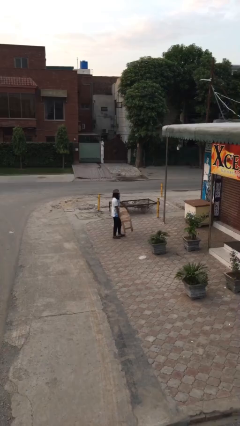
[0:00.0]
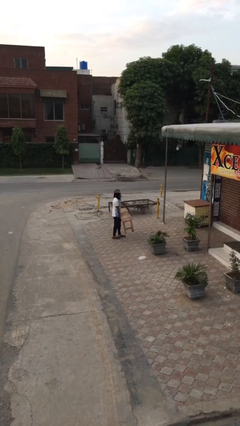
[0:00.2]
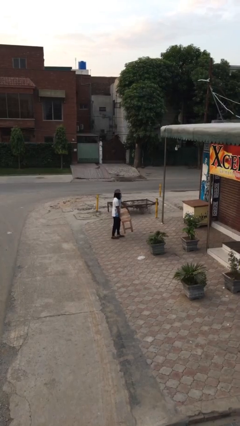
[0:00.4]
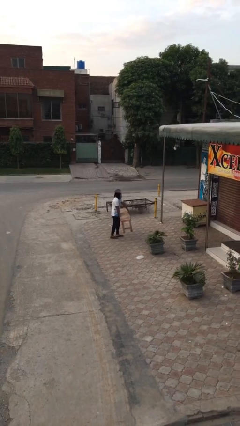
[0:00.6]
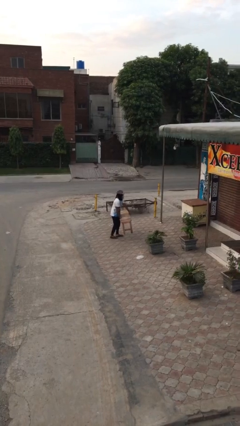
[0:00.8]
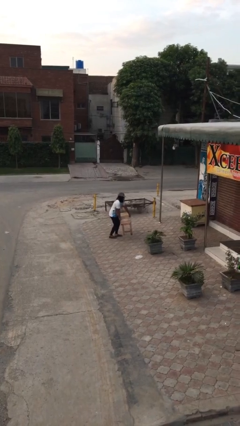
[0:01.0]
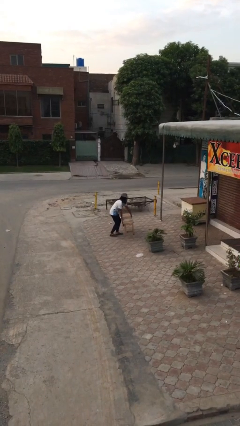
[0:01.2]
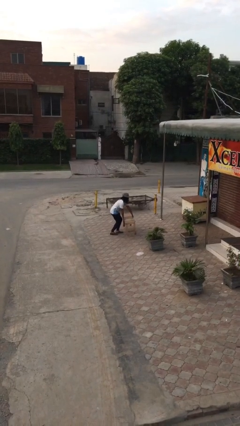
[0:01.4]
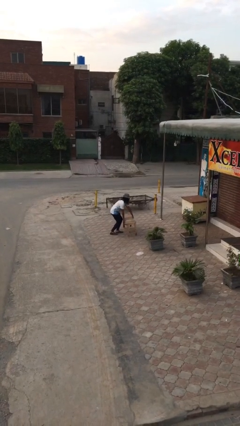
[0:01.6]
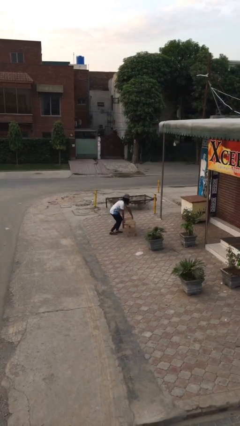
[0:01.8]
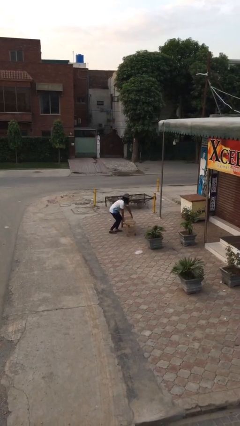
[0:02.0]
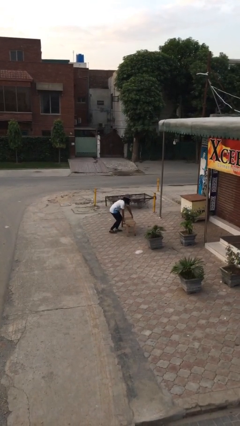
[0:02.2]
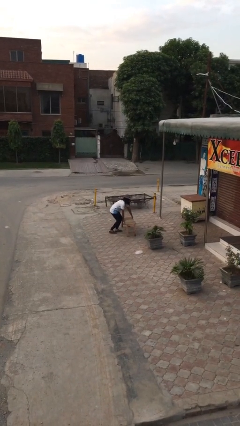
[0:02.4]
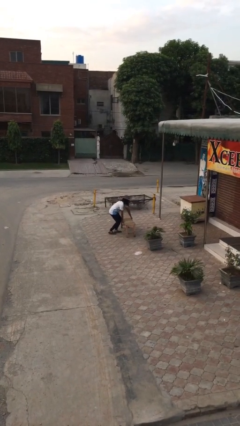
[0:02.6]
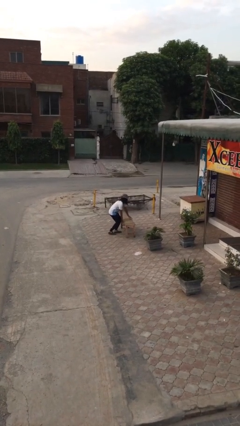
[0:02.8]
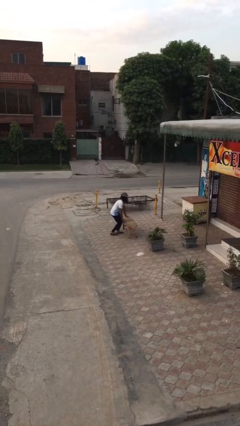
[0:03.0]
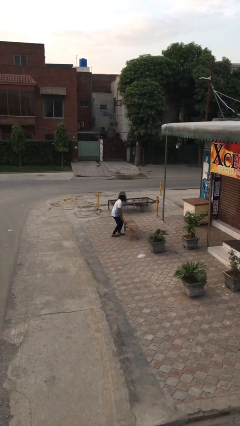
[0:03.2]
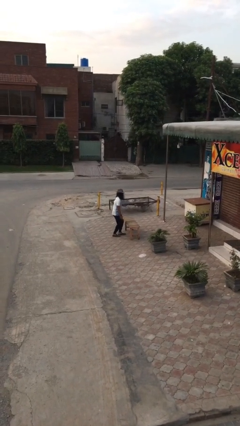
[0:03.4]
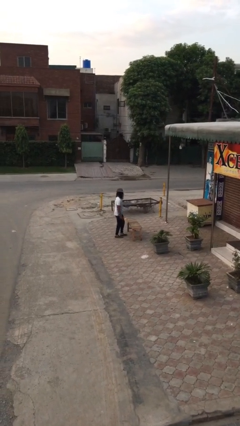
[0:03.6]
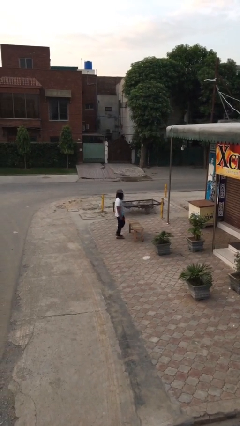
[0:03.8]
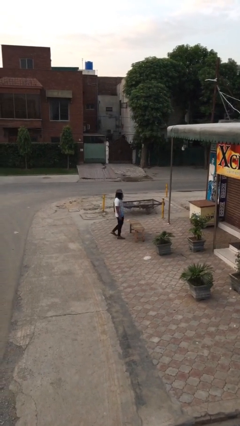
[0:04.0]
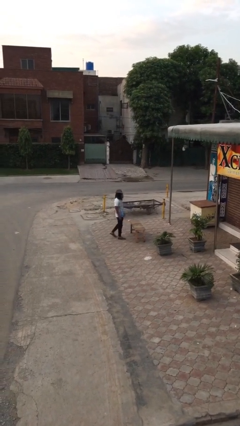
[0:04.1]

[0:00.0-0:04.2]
person puts down object on floor

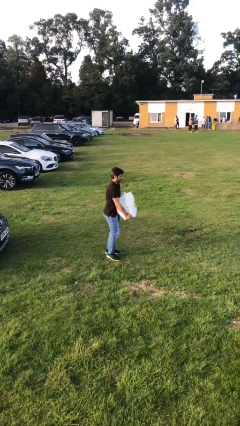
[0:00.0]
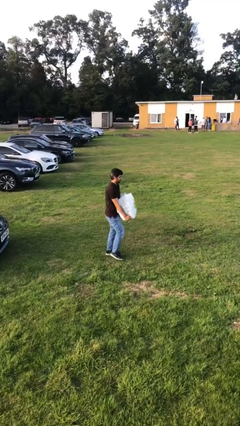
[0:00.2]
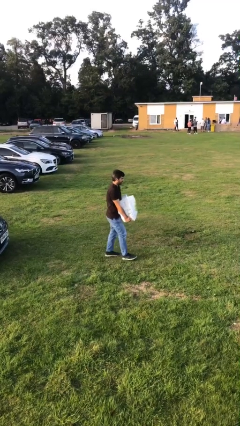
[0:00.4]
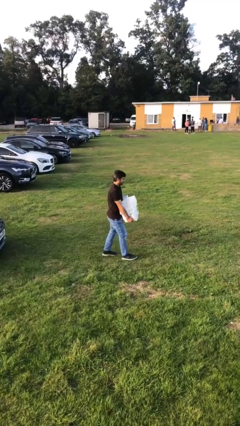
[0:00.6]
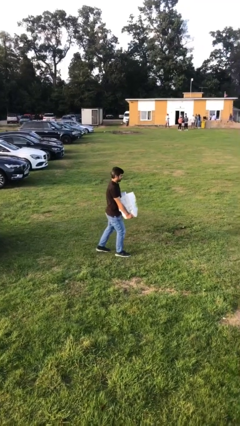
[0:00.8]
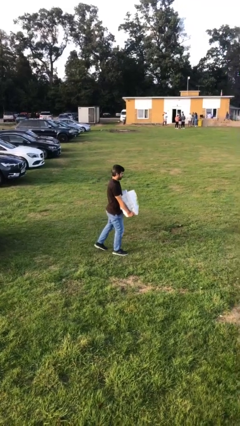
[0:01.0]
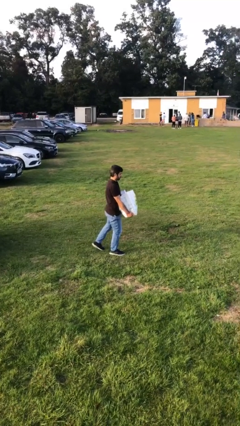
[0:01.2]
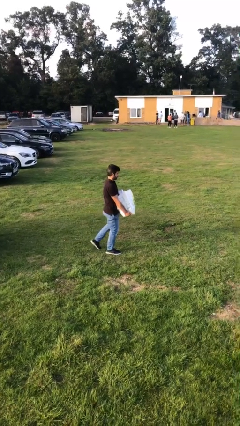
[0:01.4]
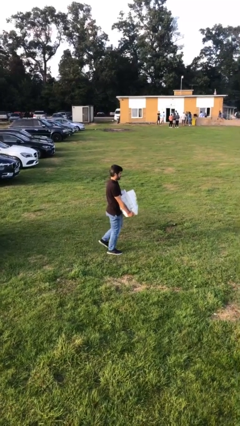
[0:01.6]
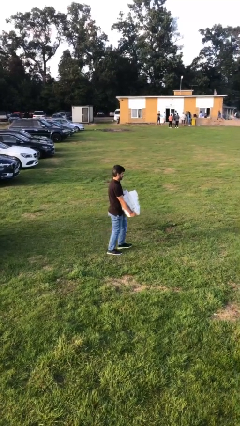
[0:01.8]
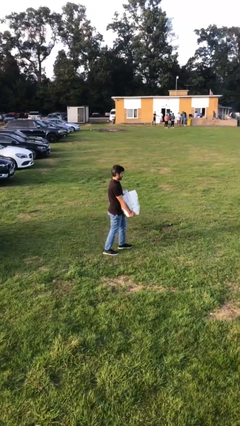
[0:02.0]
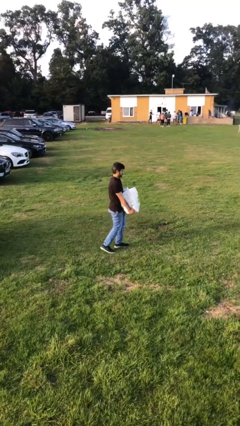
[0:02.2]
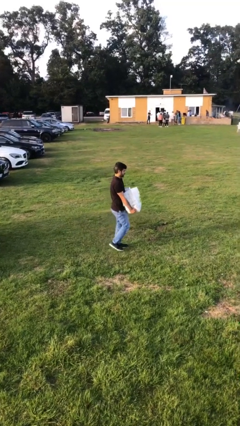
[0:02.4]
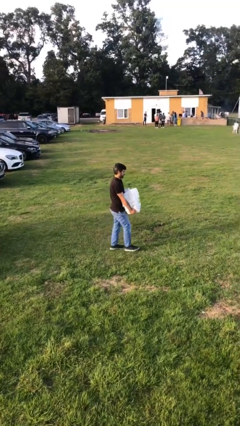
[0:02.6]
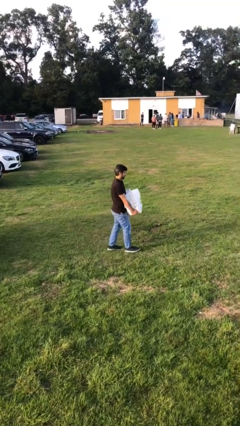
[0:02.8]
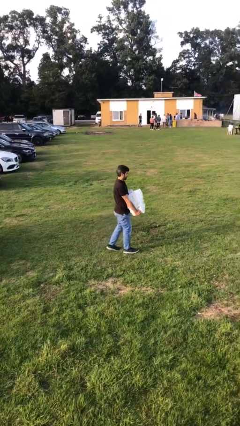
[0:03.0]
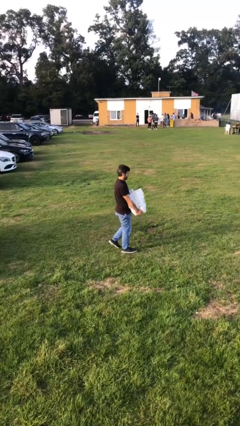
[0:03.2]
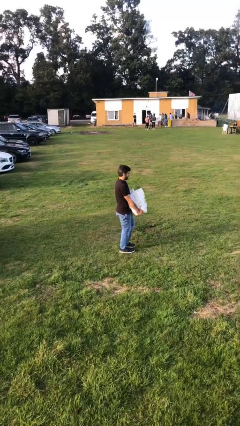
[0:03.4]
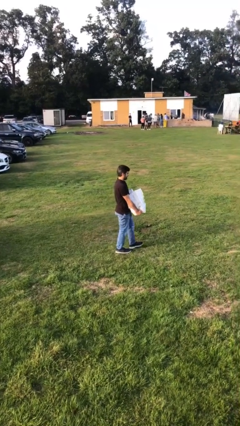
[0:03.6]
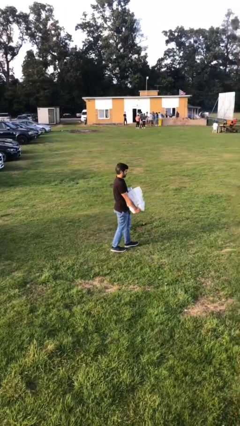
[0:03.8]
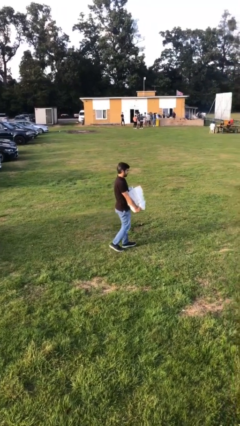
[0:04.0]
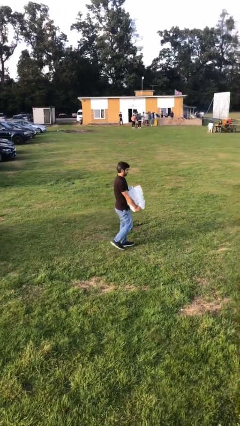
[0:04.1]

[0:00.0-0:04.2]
person carries heavy object

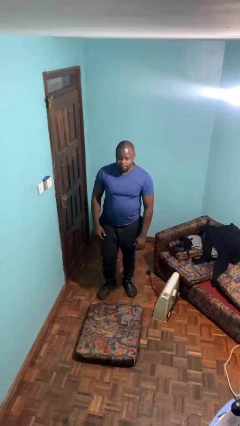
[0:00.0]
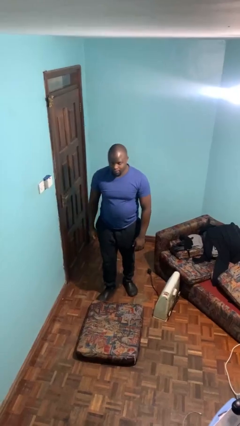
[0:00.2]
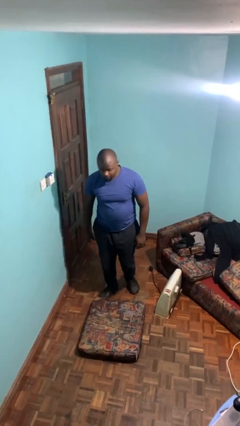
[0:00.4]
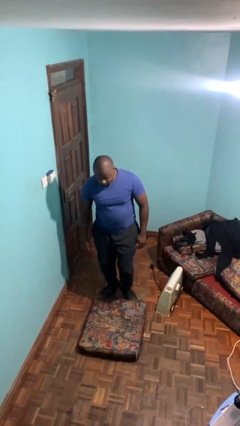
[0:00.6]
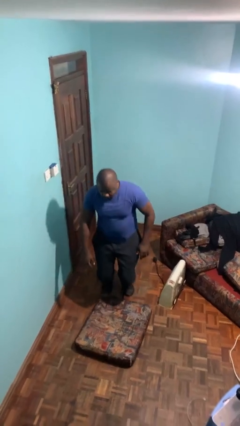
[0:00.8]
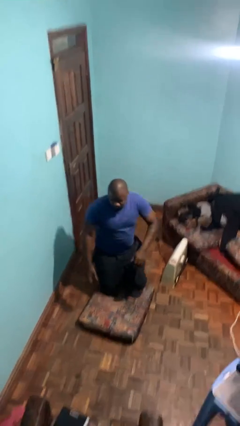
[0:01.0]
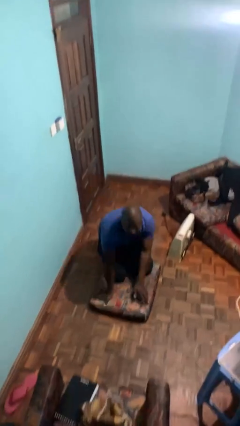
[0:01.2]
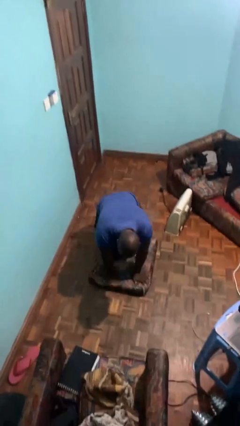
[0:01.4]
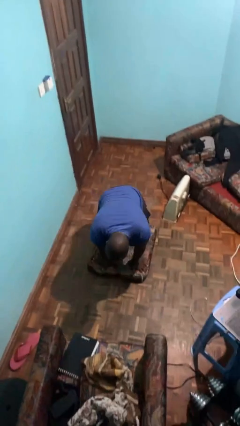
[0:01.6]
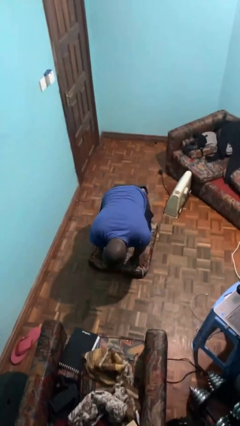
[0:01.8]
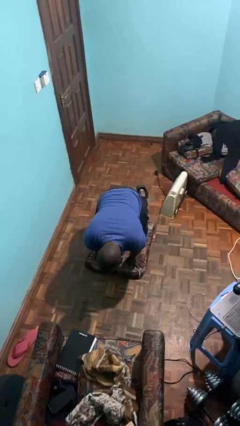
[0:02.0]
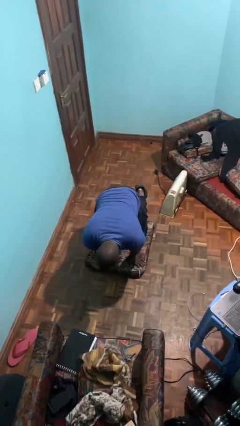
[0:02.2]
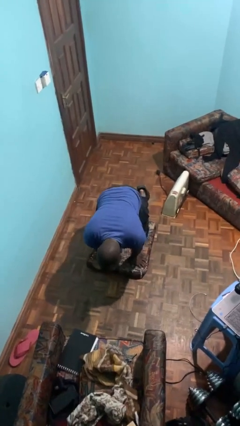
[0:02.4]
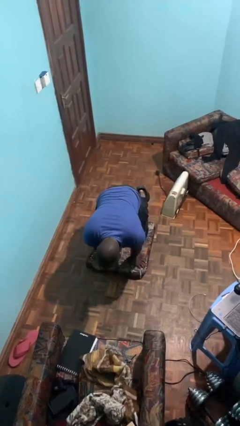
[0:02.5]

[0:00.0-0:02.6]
person trips on object on floor

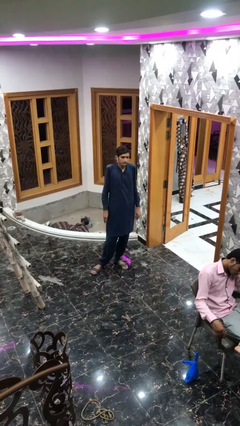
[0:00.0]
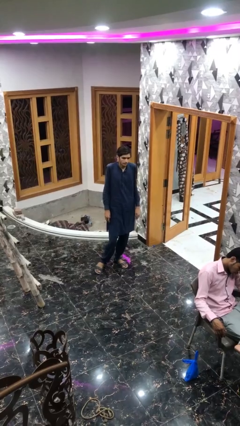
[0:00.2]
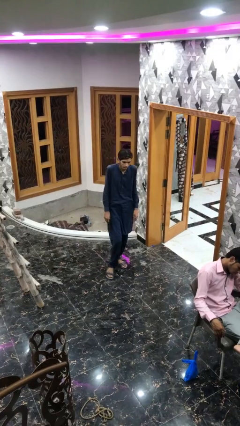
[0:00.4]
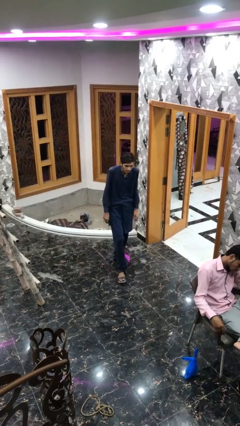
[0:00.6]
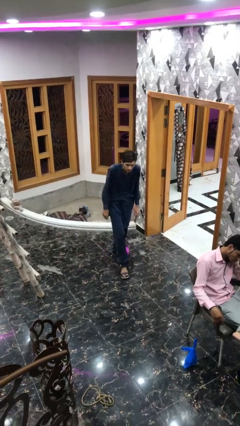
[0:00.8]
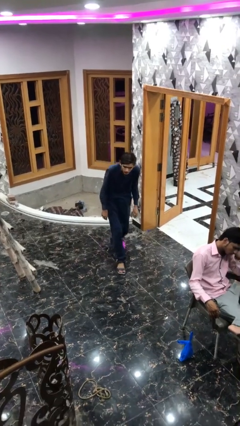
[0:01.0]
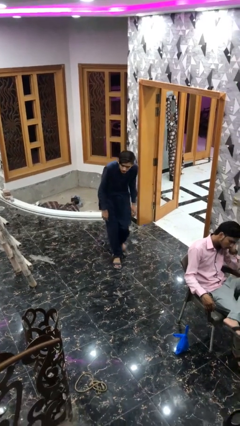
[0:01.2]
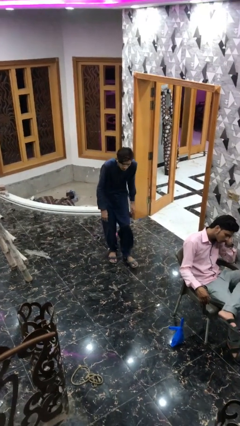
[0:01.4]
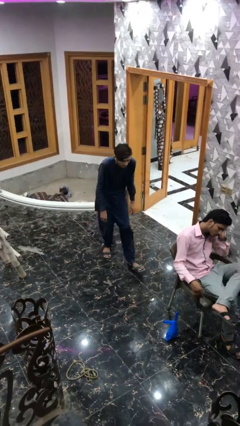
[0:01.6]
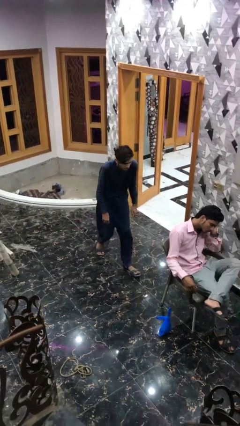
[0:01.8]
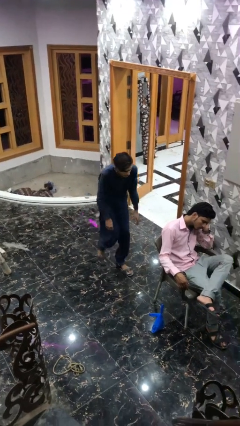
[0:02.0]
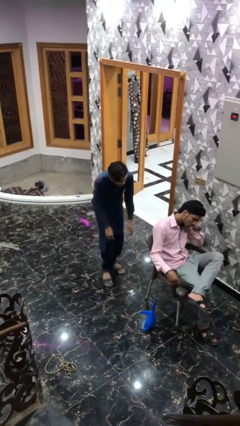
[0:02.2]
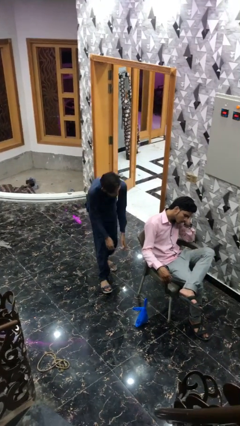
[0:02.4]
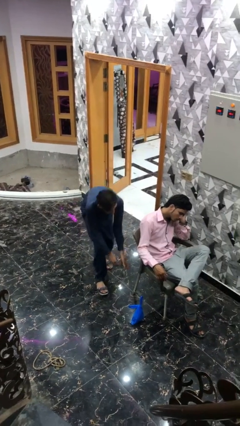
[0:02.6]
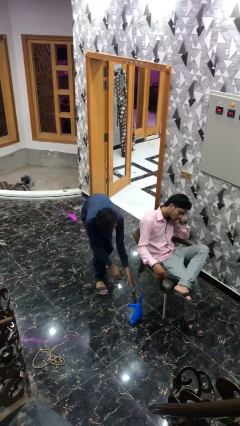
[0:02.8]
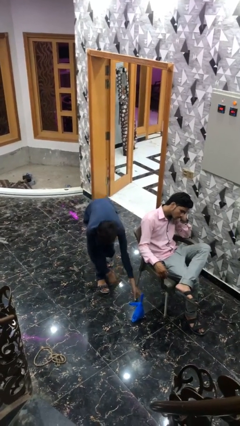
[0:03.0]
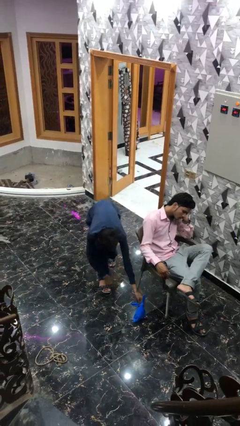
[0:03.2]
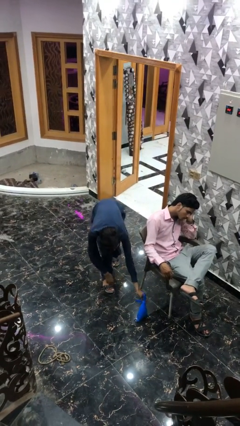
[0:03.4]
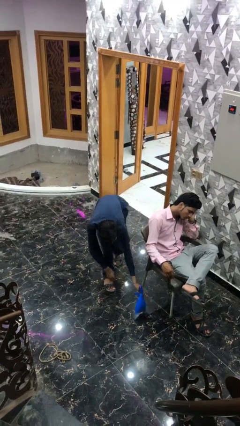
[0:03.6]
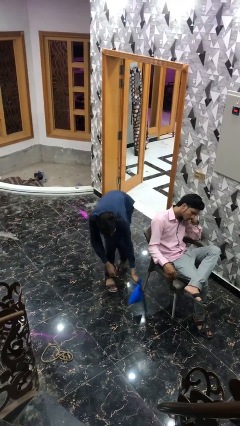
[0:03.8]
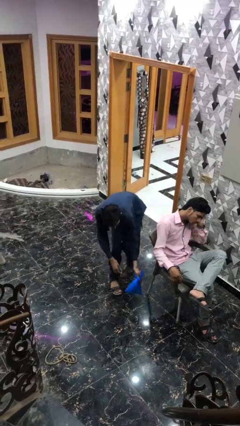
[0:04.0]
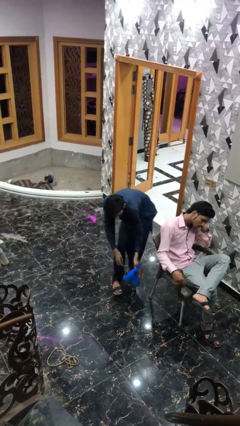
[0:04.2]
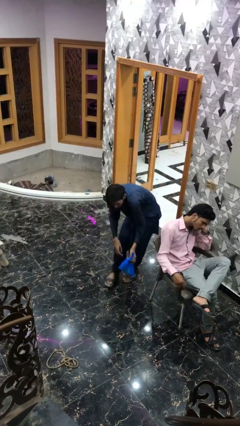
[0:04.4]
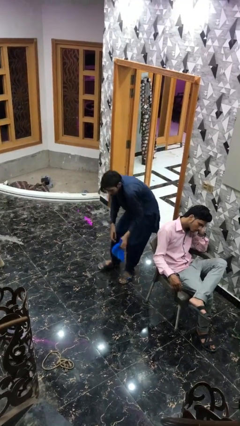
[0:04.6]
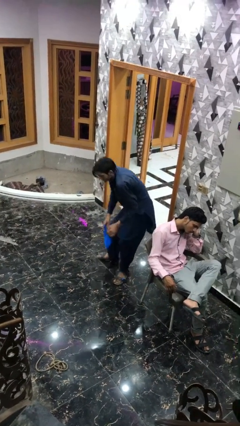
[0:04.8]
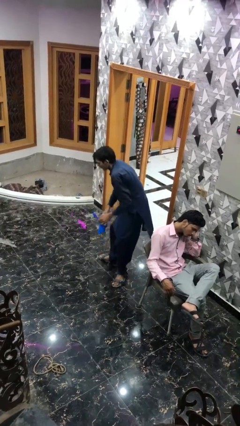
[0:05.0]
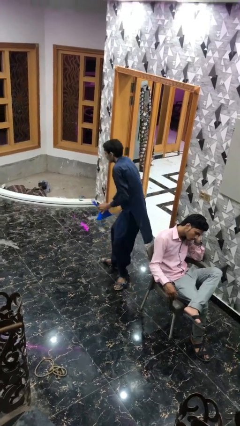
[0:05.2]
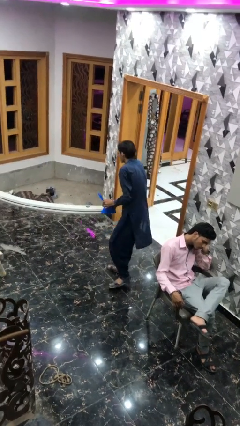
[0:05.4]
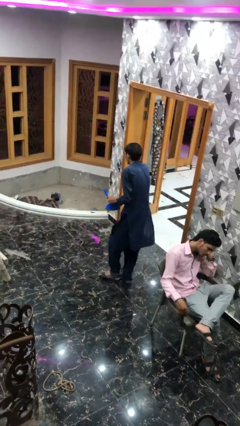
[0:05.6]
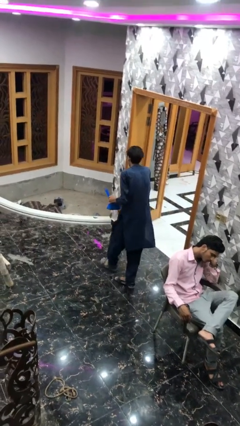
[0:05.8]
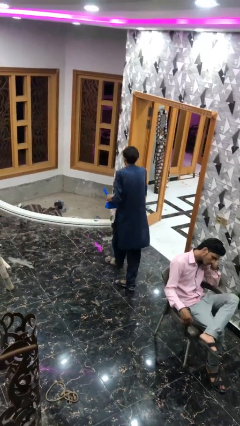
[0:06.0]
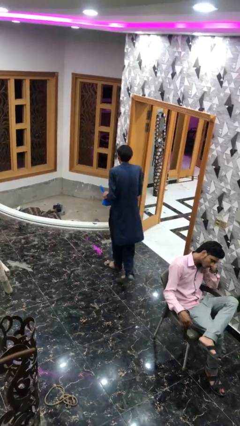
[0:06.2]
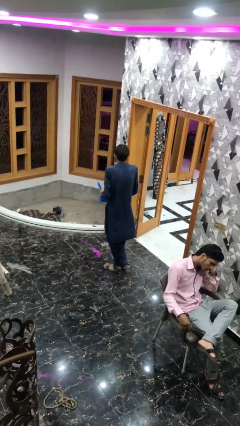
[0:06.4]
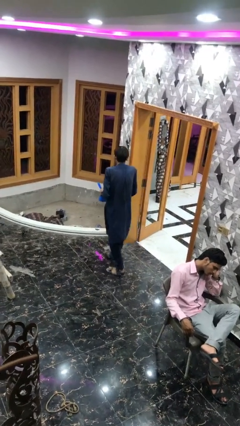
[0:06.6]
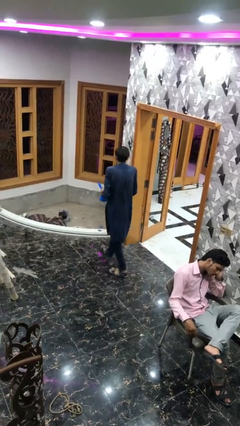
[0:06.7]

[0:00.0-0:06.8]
person steals object from person
